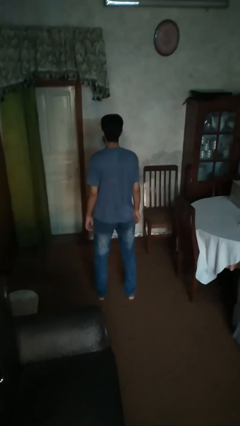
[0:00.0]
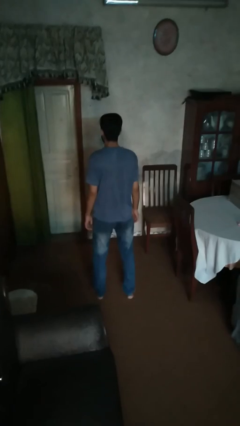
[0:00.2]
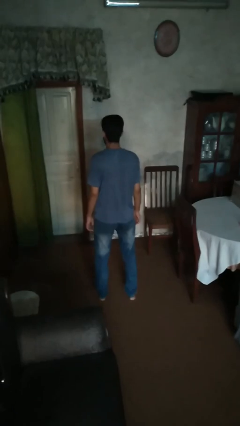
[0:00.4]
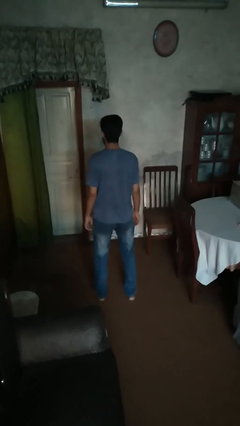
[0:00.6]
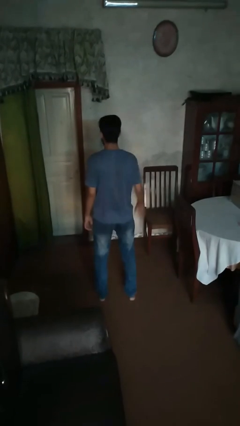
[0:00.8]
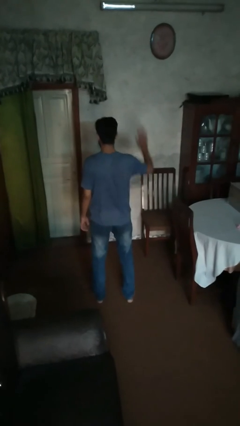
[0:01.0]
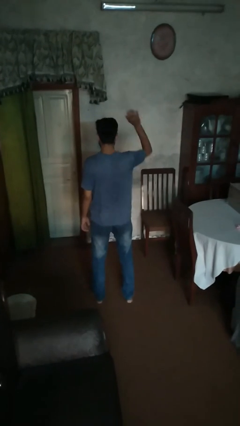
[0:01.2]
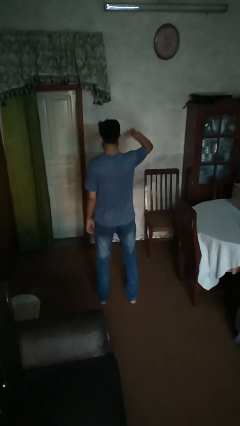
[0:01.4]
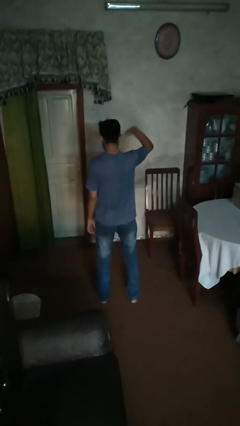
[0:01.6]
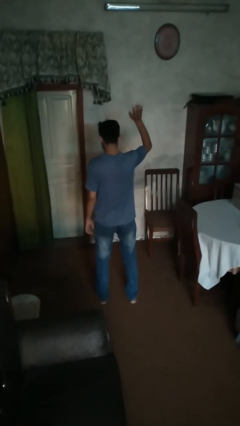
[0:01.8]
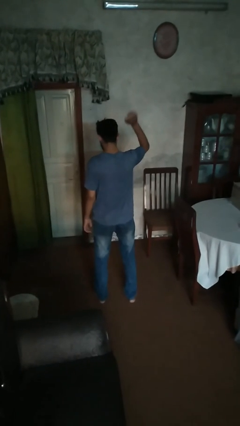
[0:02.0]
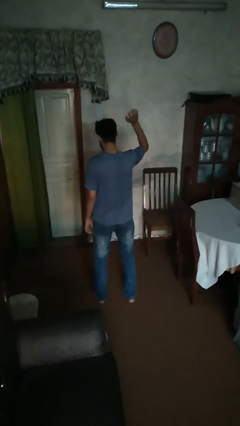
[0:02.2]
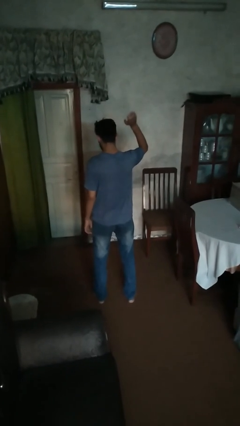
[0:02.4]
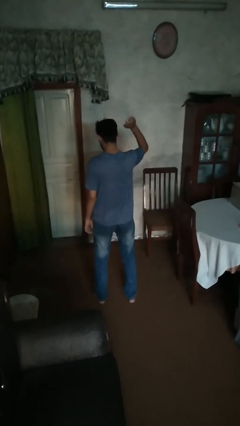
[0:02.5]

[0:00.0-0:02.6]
person gestures raise hand

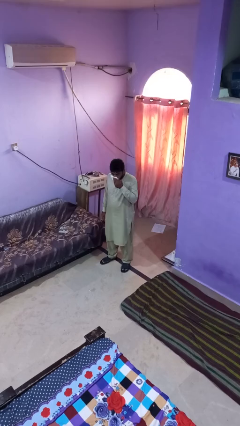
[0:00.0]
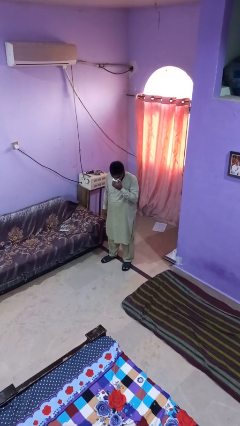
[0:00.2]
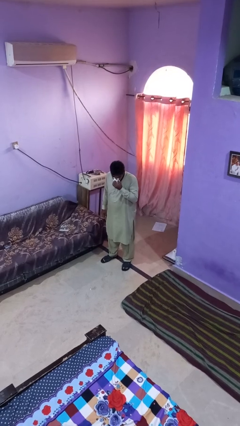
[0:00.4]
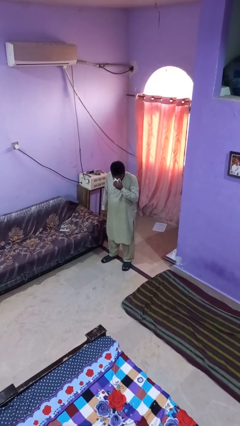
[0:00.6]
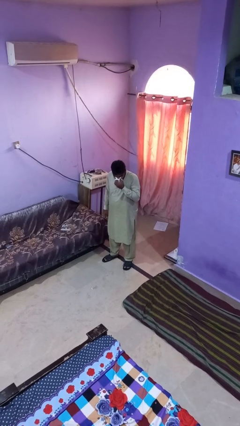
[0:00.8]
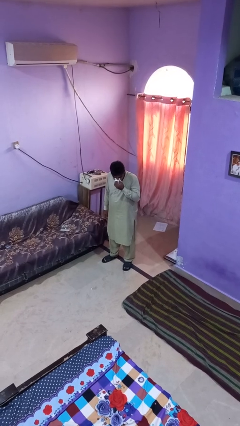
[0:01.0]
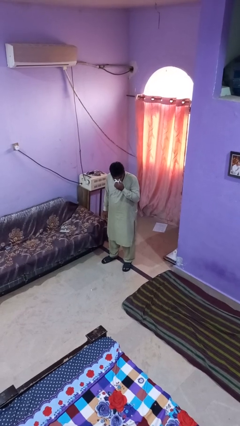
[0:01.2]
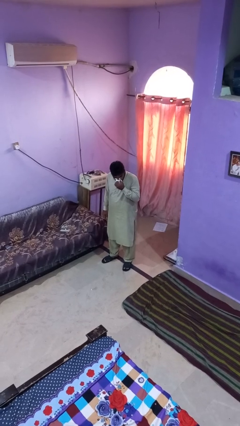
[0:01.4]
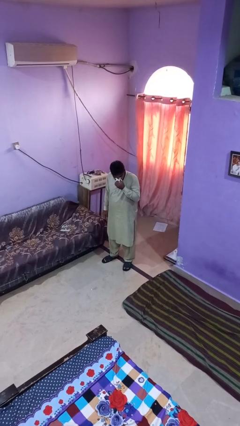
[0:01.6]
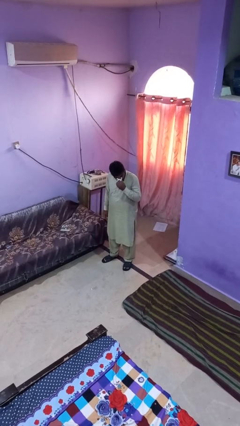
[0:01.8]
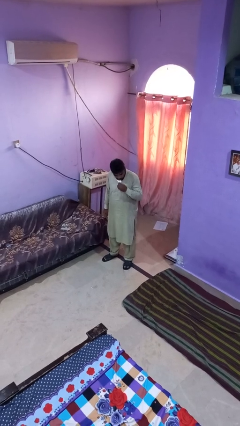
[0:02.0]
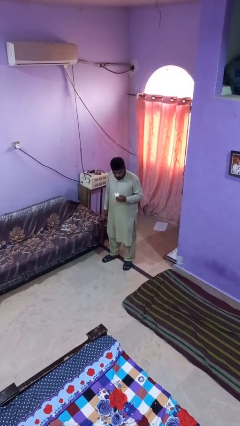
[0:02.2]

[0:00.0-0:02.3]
person blows nose

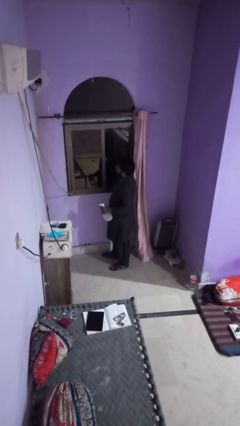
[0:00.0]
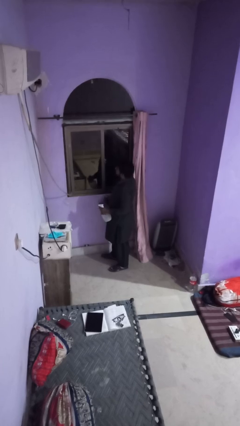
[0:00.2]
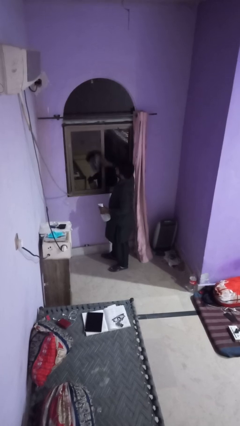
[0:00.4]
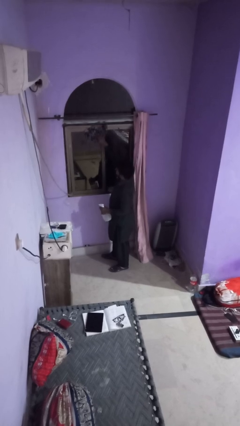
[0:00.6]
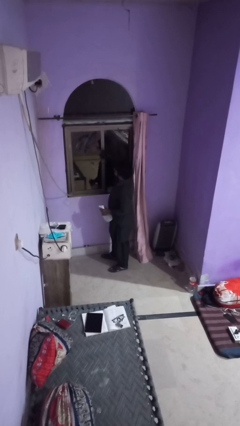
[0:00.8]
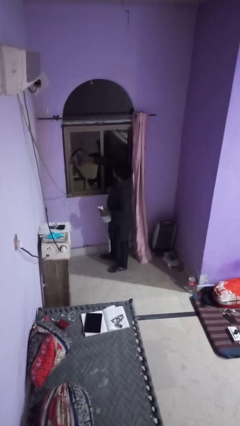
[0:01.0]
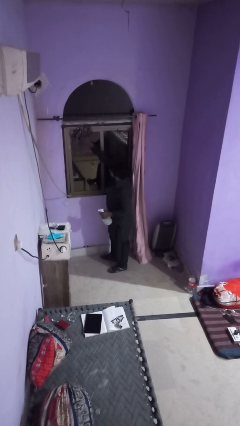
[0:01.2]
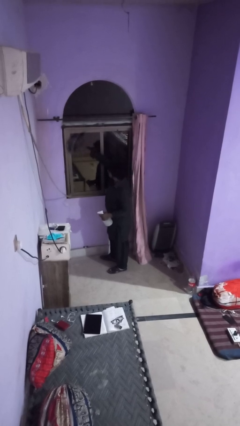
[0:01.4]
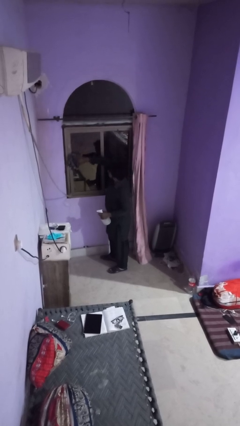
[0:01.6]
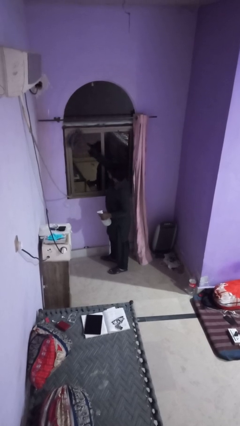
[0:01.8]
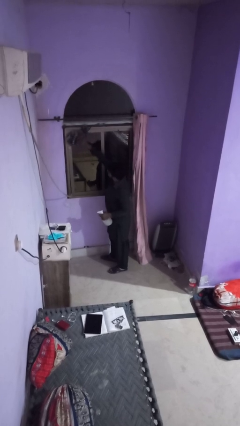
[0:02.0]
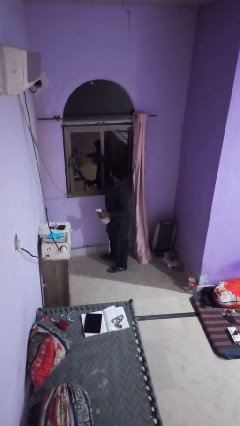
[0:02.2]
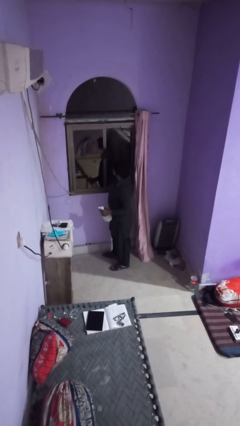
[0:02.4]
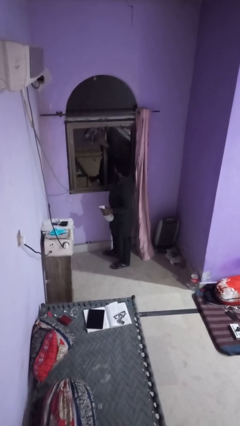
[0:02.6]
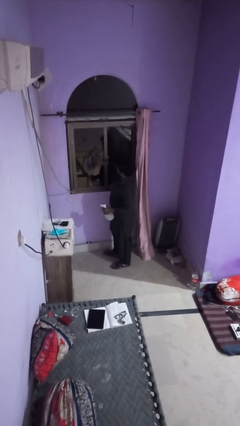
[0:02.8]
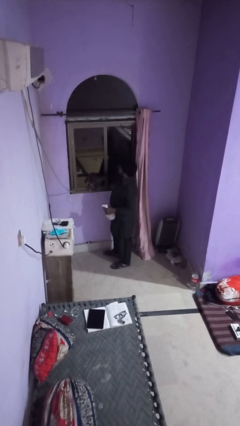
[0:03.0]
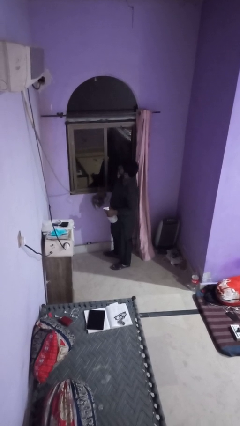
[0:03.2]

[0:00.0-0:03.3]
person washes window

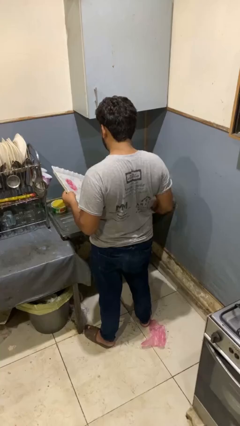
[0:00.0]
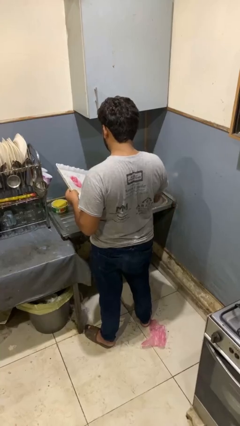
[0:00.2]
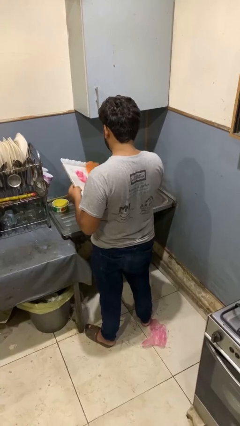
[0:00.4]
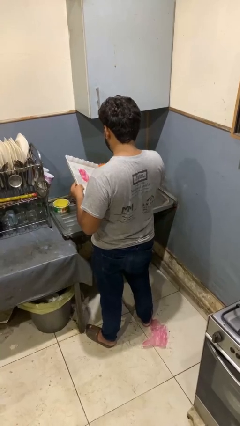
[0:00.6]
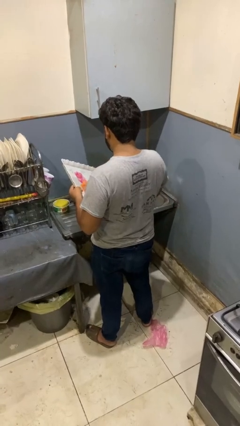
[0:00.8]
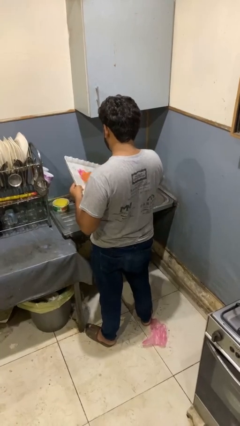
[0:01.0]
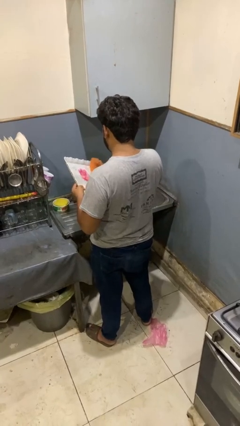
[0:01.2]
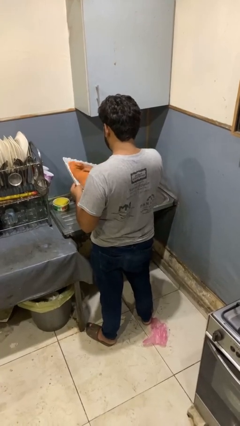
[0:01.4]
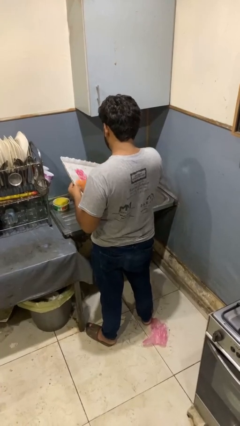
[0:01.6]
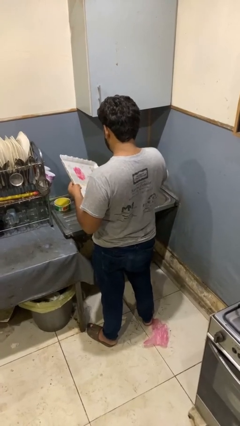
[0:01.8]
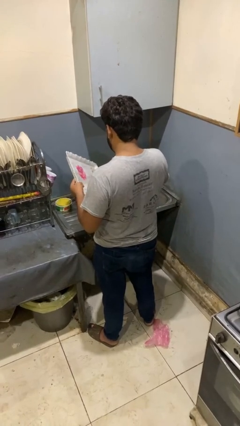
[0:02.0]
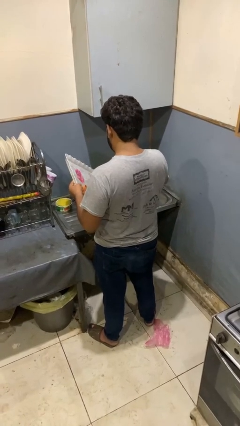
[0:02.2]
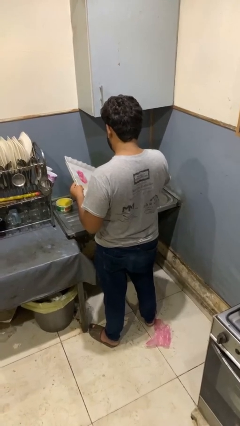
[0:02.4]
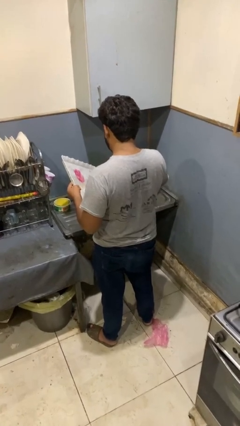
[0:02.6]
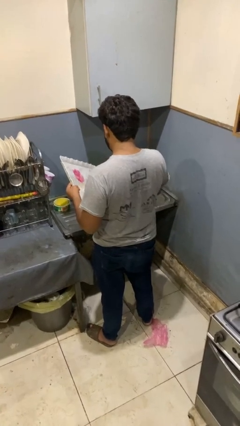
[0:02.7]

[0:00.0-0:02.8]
person dries dish

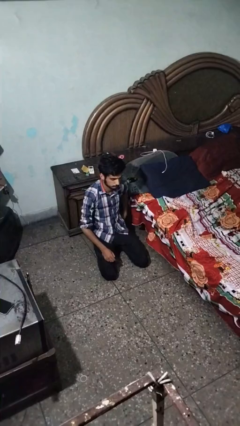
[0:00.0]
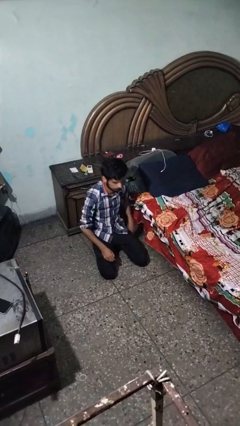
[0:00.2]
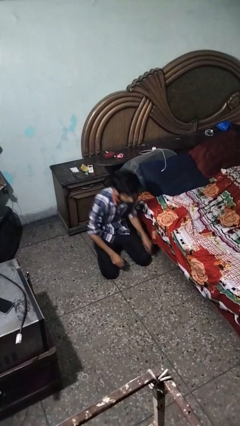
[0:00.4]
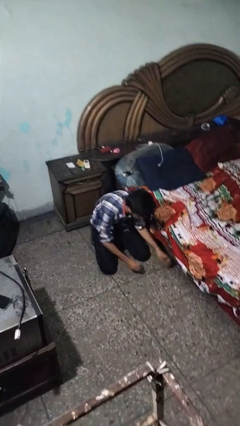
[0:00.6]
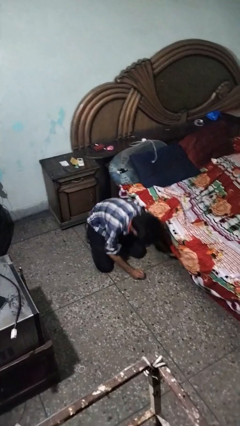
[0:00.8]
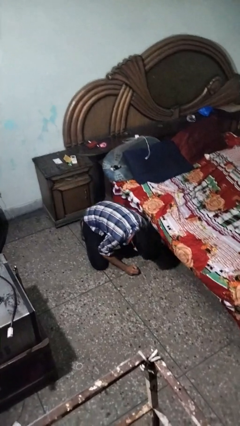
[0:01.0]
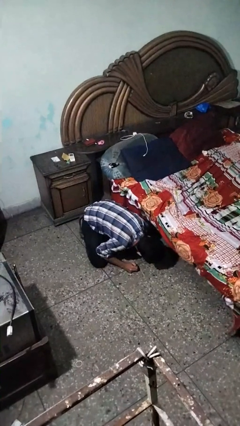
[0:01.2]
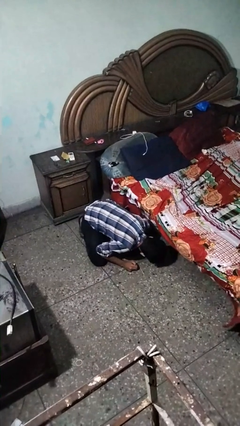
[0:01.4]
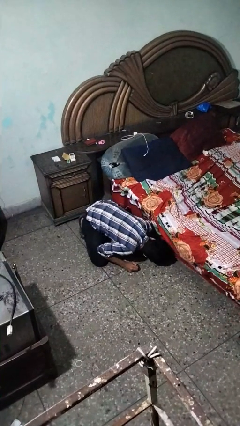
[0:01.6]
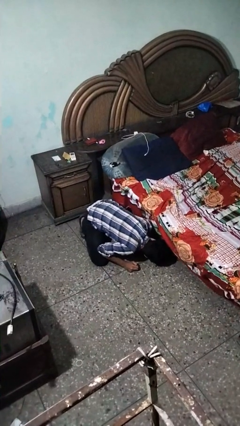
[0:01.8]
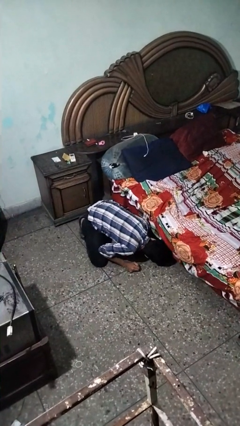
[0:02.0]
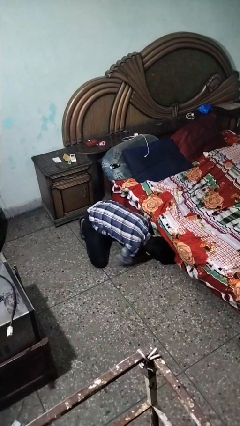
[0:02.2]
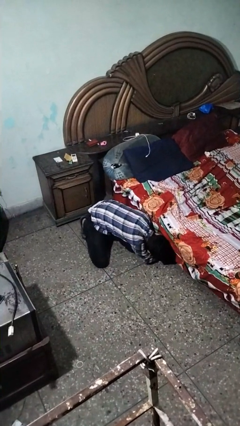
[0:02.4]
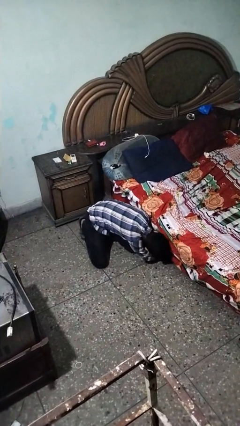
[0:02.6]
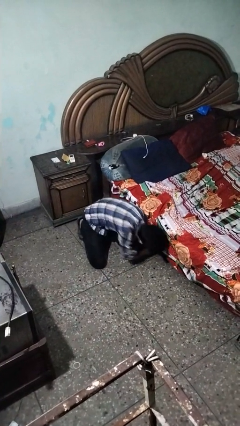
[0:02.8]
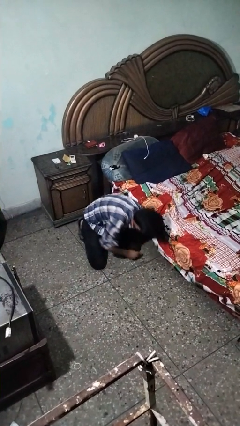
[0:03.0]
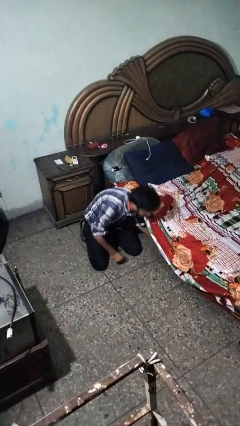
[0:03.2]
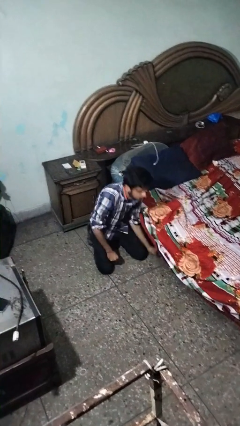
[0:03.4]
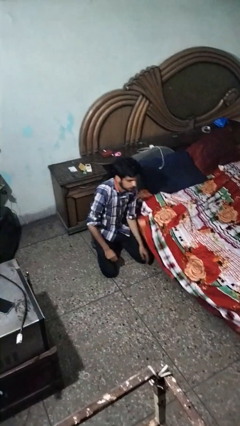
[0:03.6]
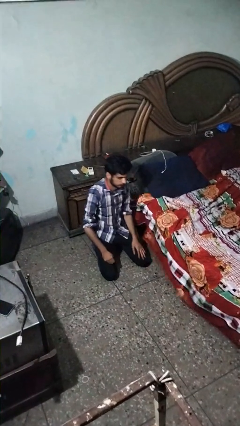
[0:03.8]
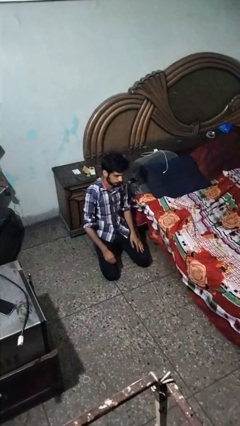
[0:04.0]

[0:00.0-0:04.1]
person searches under bed

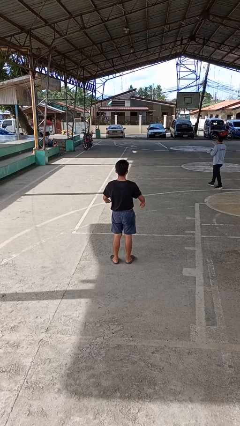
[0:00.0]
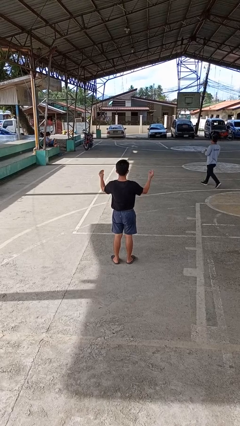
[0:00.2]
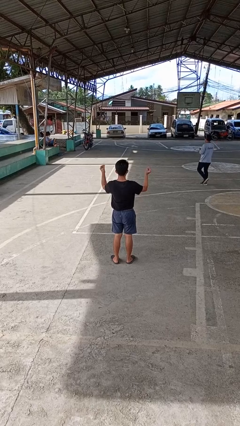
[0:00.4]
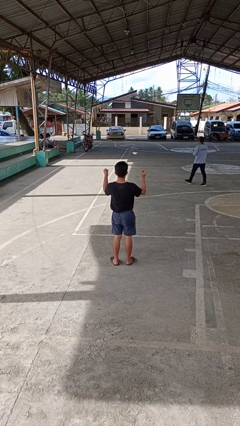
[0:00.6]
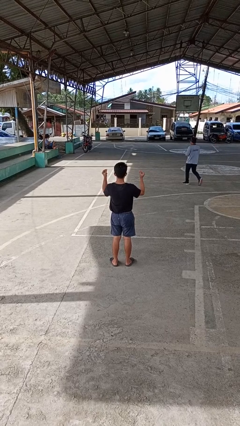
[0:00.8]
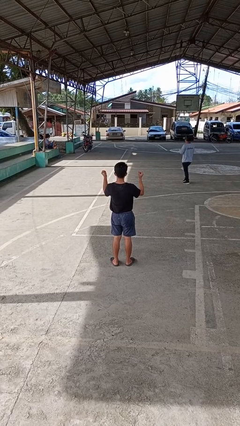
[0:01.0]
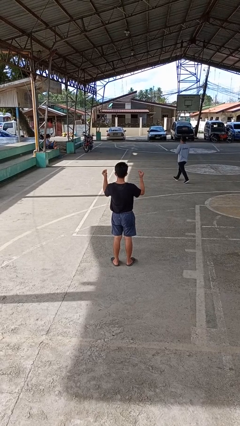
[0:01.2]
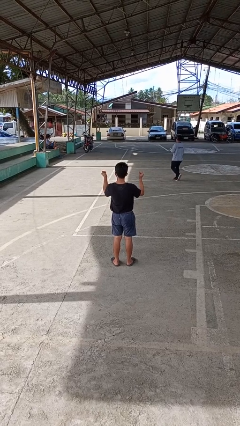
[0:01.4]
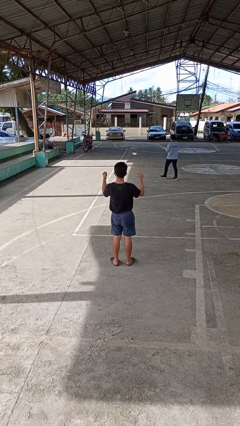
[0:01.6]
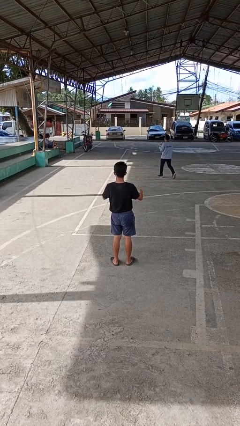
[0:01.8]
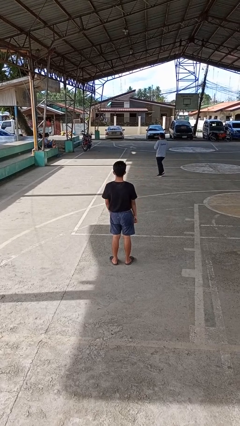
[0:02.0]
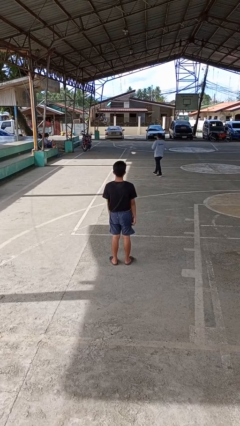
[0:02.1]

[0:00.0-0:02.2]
person snaps fingers
